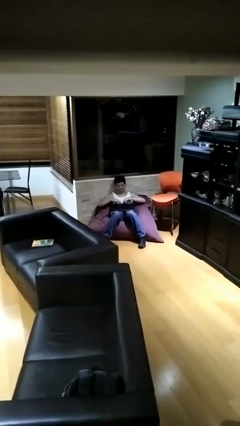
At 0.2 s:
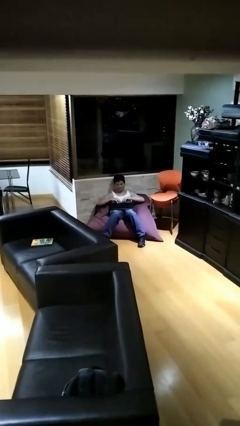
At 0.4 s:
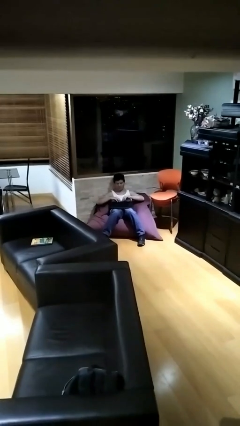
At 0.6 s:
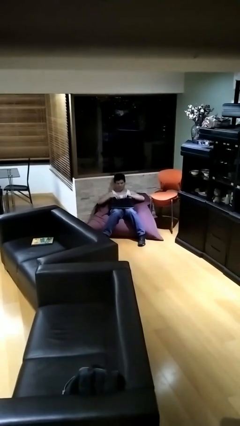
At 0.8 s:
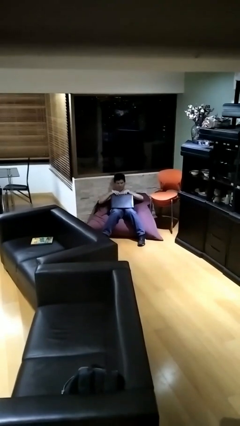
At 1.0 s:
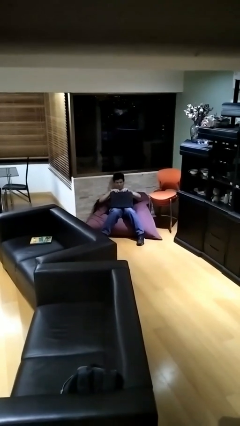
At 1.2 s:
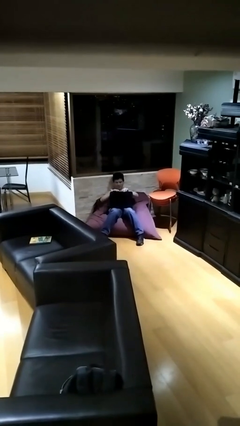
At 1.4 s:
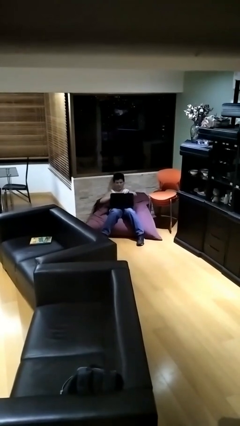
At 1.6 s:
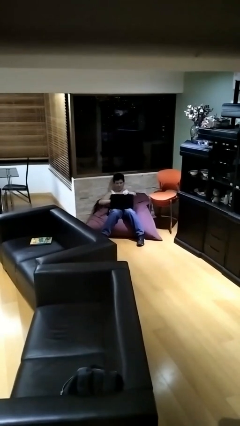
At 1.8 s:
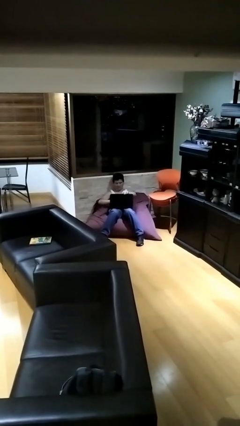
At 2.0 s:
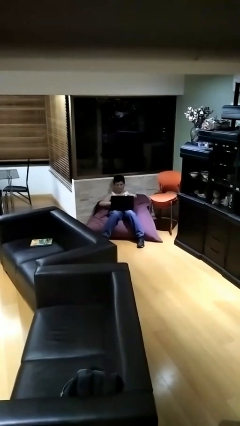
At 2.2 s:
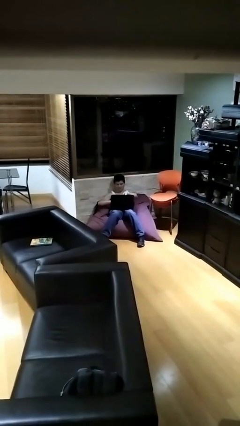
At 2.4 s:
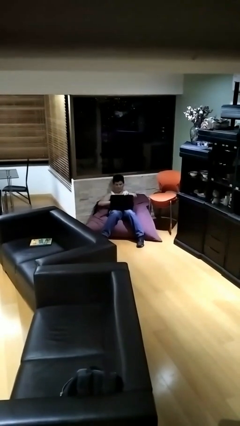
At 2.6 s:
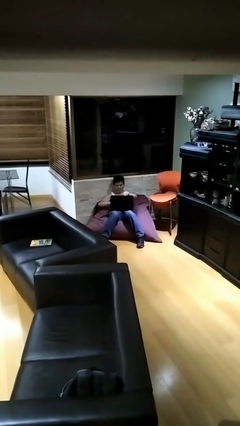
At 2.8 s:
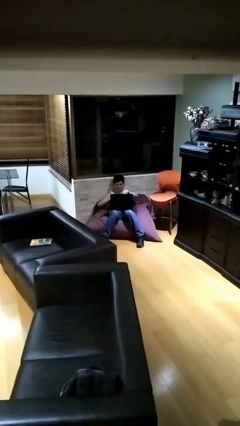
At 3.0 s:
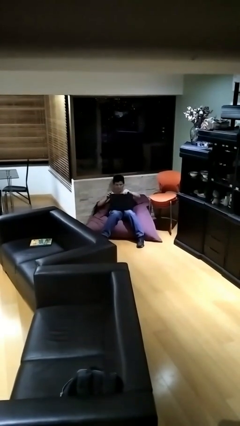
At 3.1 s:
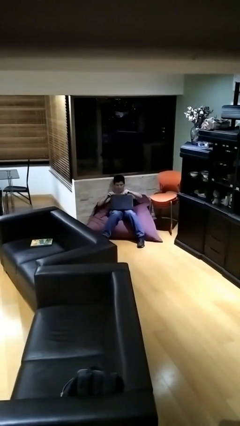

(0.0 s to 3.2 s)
person interacts with laptop

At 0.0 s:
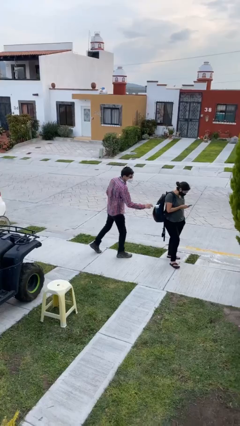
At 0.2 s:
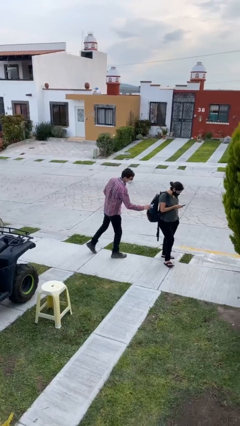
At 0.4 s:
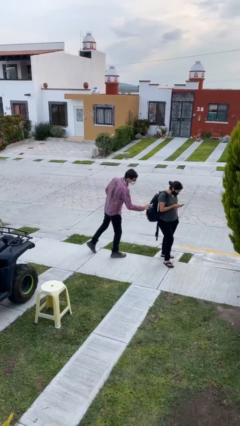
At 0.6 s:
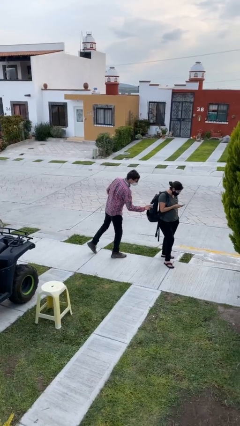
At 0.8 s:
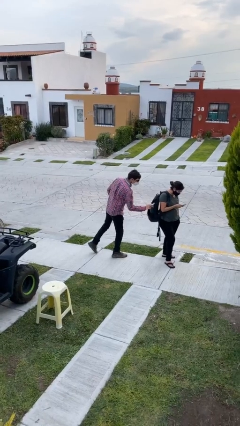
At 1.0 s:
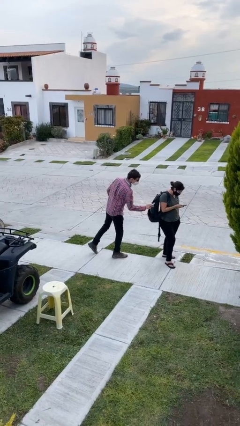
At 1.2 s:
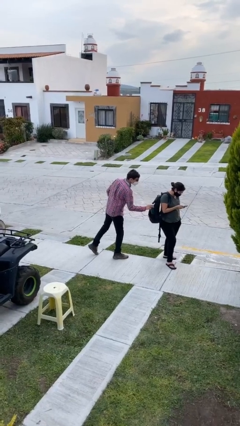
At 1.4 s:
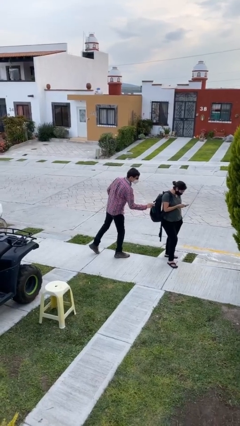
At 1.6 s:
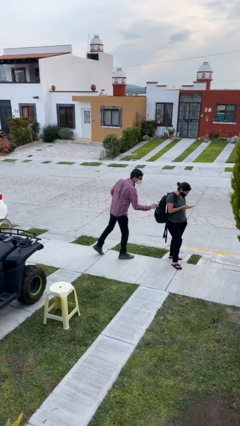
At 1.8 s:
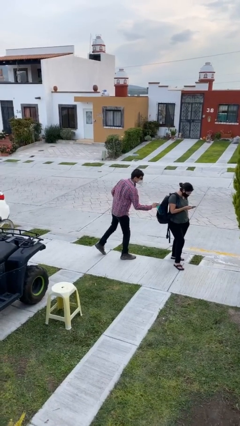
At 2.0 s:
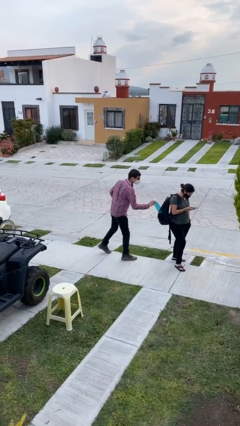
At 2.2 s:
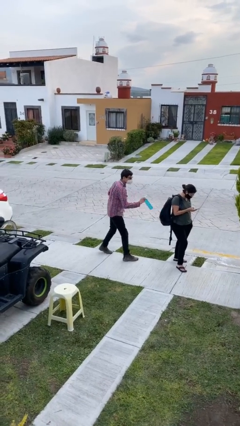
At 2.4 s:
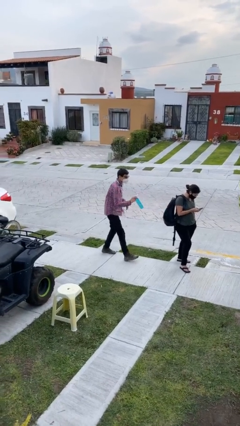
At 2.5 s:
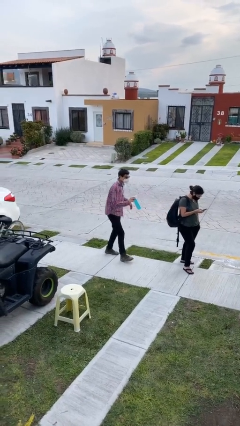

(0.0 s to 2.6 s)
person steals object from person

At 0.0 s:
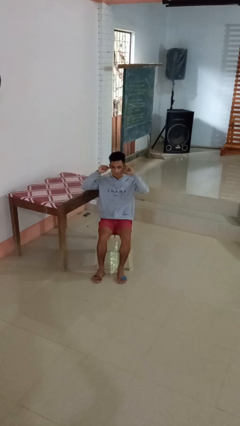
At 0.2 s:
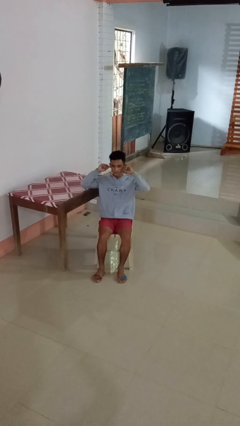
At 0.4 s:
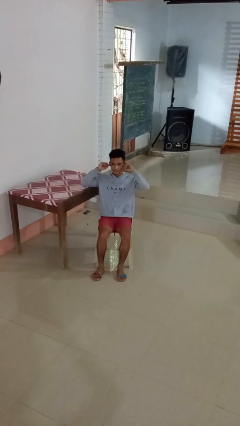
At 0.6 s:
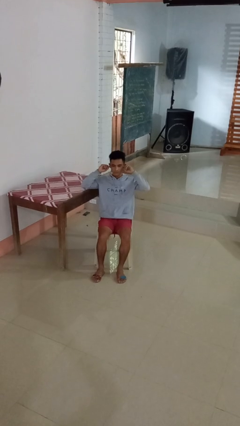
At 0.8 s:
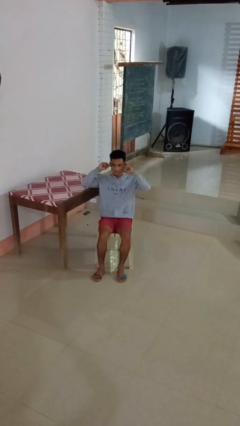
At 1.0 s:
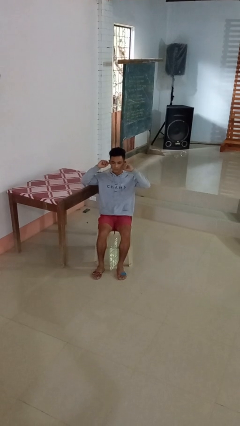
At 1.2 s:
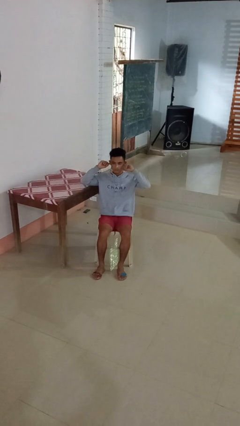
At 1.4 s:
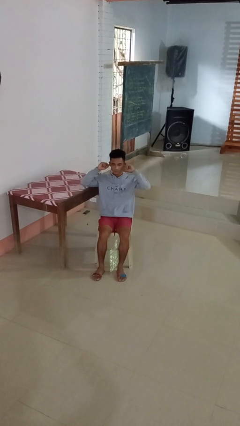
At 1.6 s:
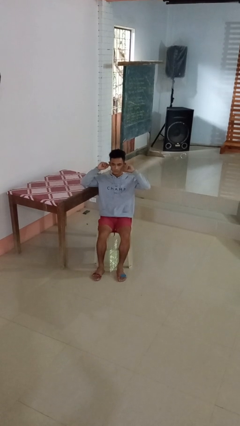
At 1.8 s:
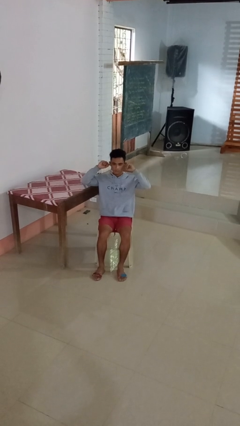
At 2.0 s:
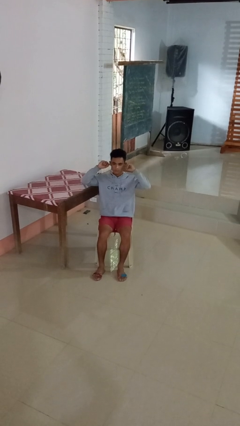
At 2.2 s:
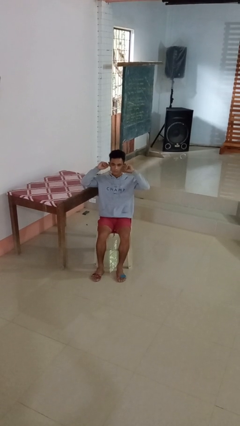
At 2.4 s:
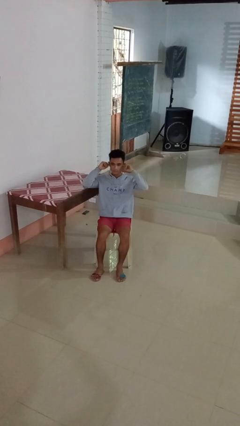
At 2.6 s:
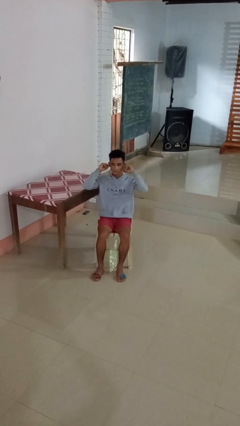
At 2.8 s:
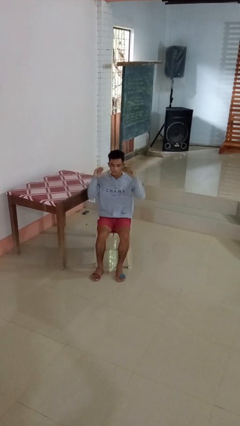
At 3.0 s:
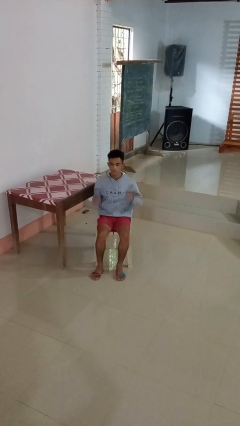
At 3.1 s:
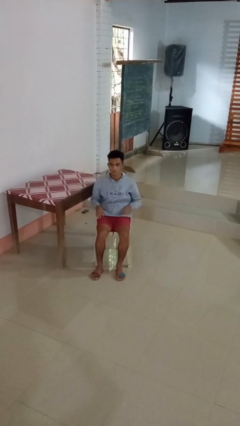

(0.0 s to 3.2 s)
person puts fingers in ear

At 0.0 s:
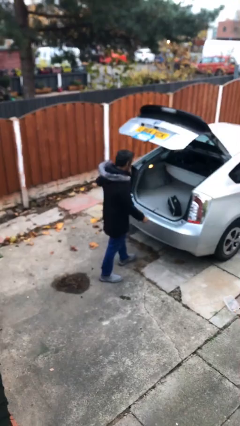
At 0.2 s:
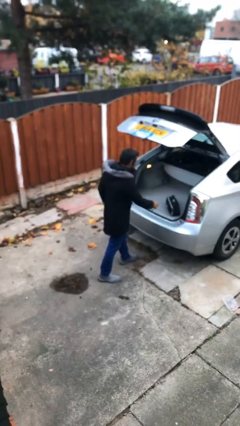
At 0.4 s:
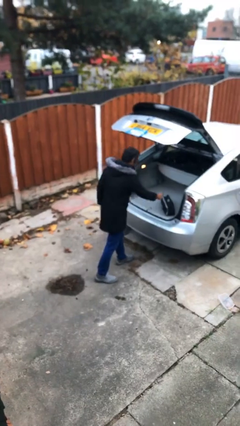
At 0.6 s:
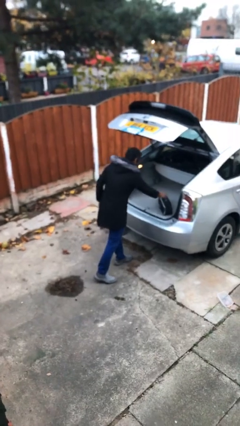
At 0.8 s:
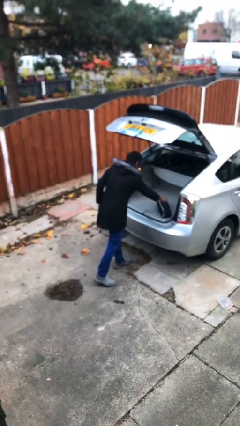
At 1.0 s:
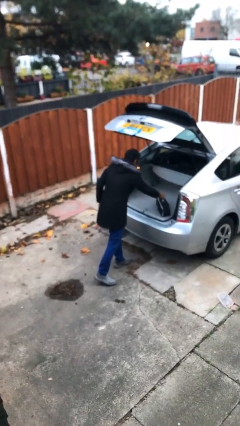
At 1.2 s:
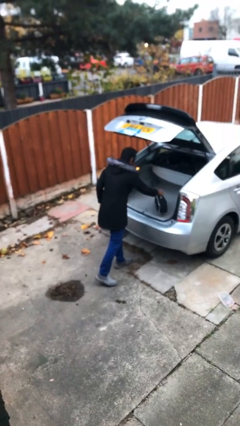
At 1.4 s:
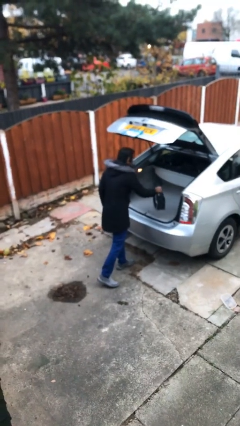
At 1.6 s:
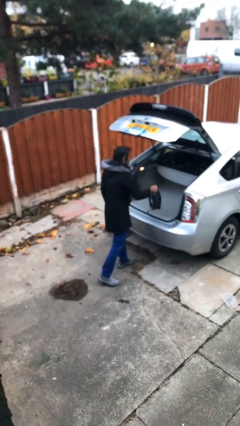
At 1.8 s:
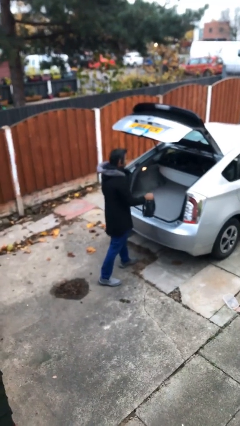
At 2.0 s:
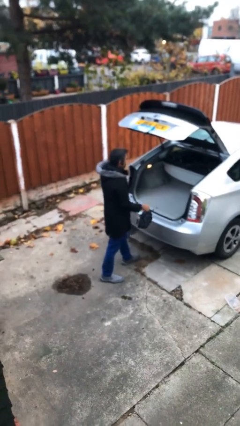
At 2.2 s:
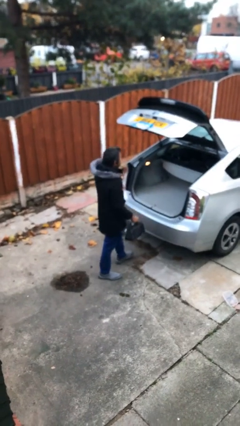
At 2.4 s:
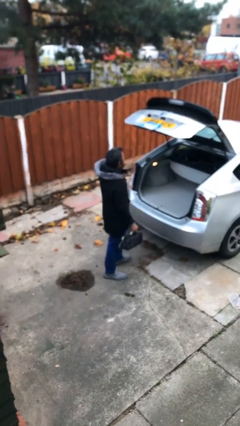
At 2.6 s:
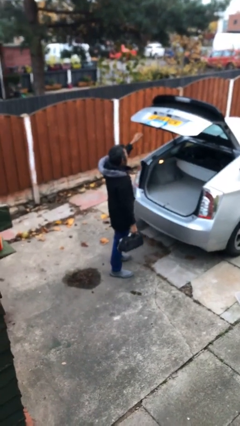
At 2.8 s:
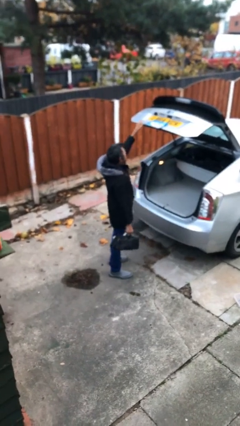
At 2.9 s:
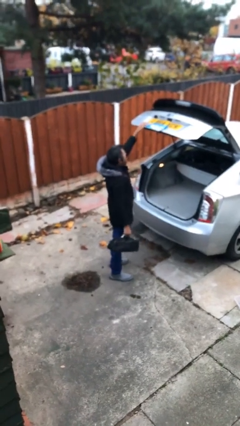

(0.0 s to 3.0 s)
person unloads car

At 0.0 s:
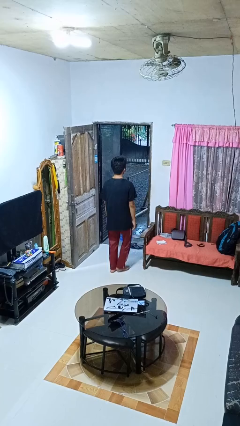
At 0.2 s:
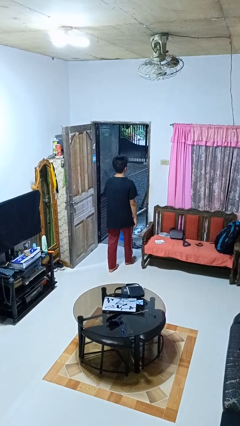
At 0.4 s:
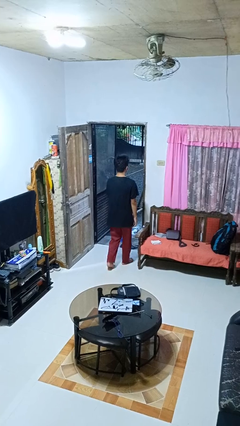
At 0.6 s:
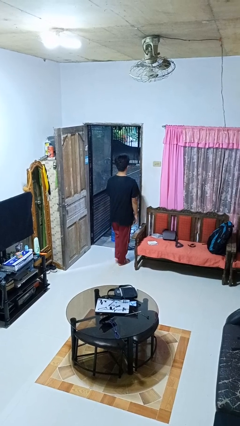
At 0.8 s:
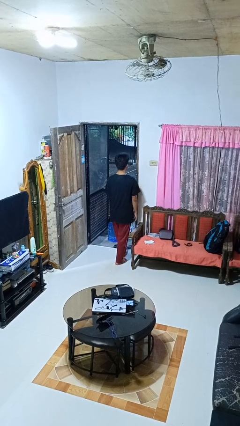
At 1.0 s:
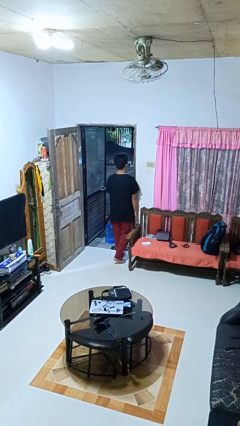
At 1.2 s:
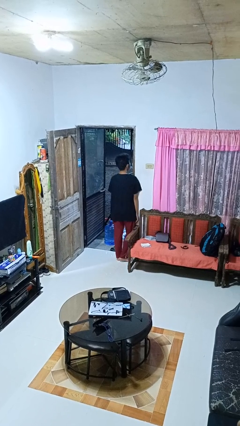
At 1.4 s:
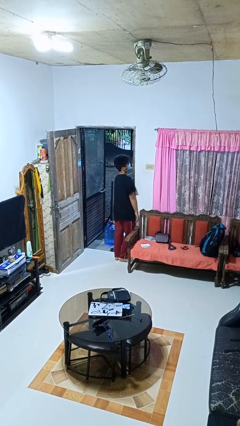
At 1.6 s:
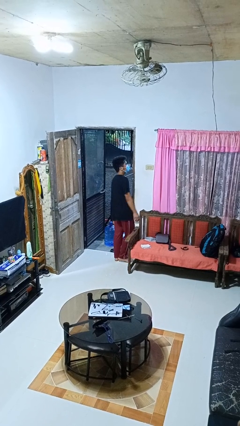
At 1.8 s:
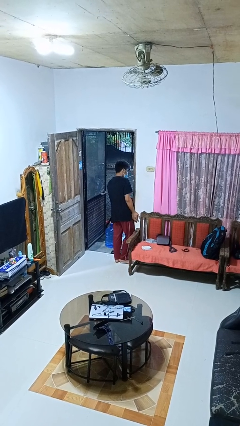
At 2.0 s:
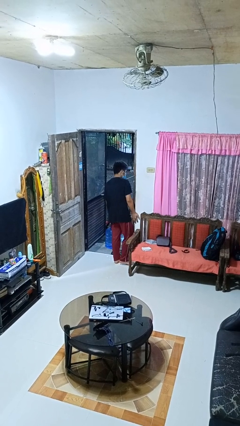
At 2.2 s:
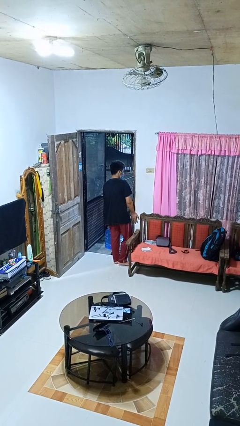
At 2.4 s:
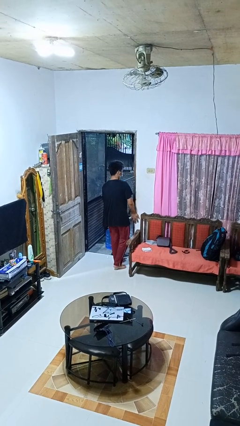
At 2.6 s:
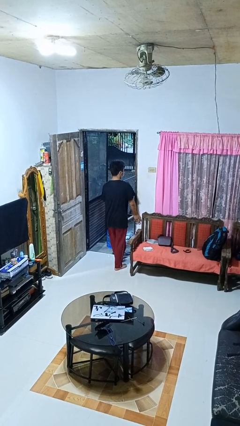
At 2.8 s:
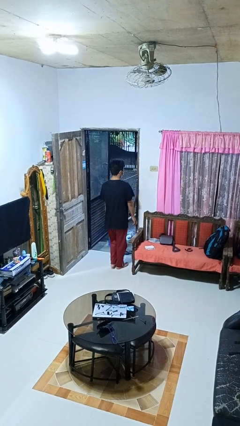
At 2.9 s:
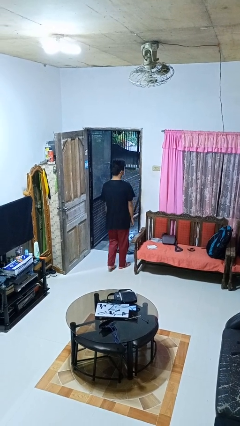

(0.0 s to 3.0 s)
person bumps into wall

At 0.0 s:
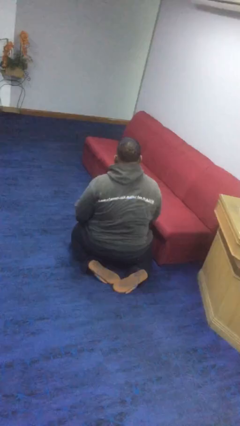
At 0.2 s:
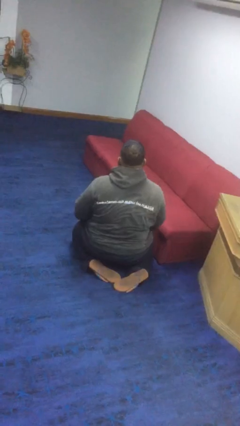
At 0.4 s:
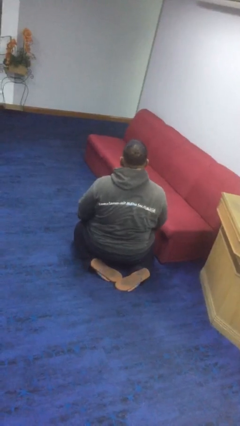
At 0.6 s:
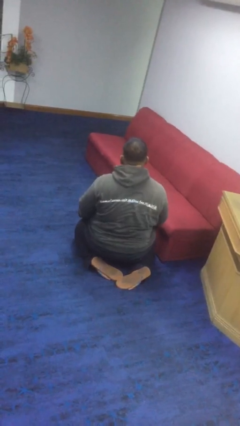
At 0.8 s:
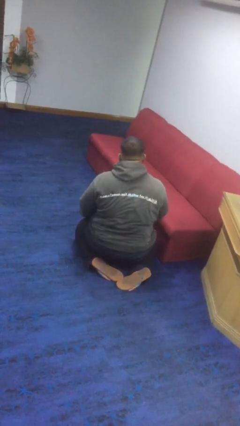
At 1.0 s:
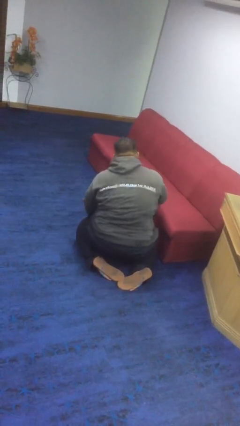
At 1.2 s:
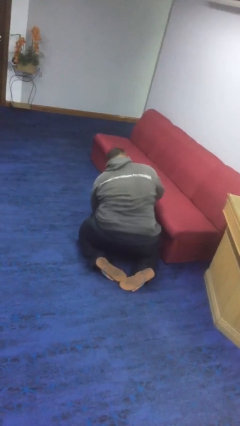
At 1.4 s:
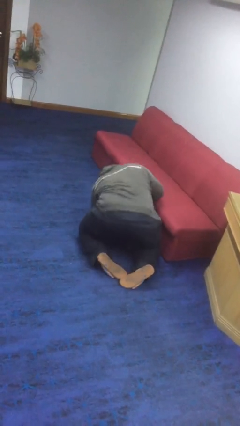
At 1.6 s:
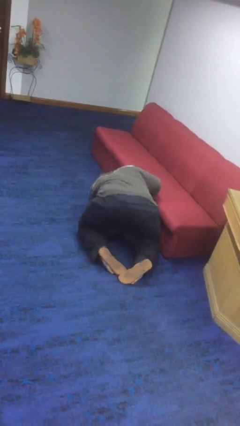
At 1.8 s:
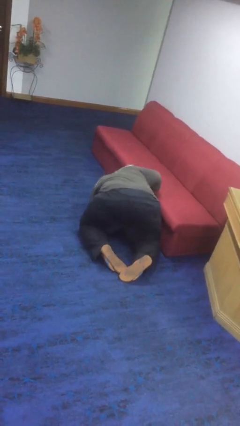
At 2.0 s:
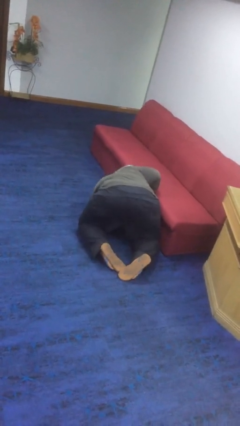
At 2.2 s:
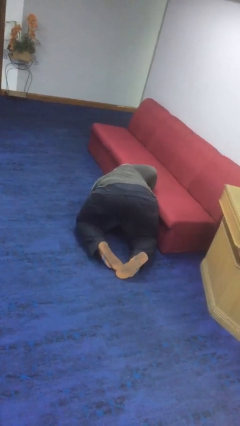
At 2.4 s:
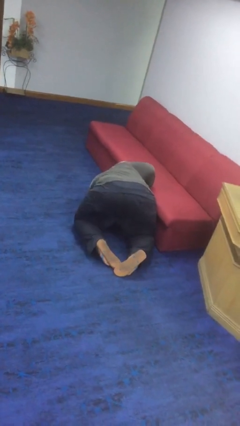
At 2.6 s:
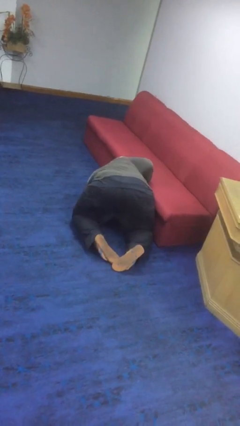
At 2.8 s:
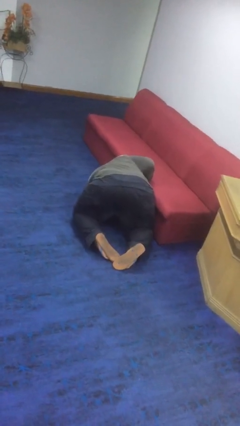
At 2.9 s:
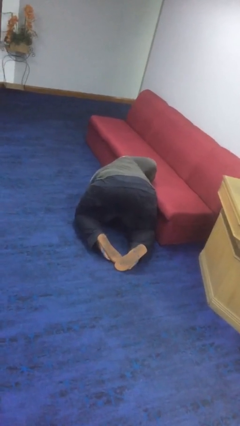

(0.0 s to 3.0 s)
person searches under couch
